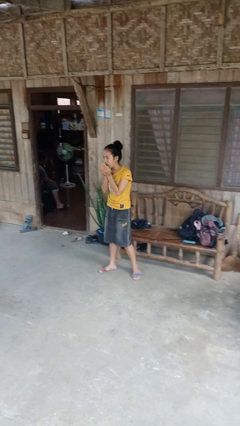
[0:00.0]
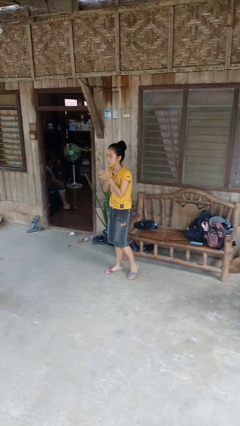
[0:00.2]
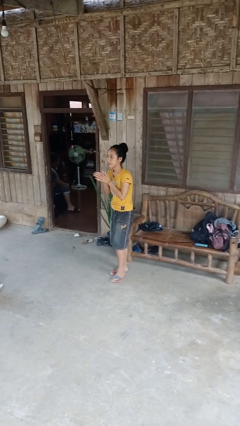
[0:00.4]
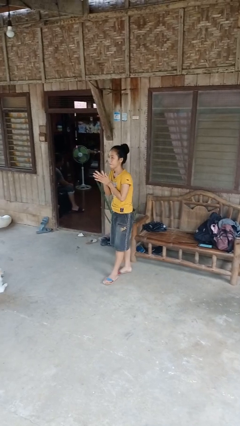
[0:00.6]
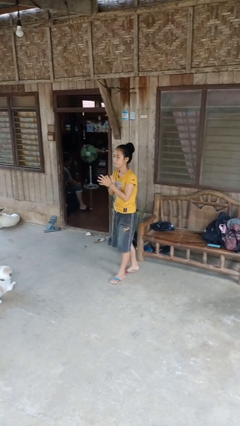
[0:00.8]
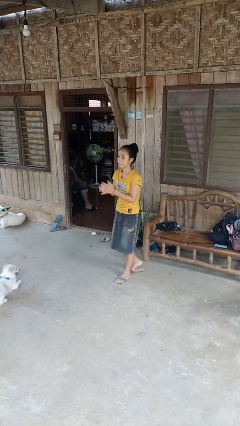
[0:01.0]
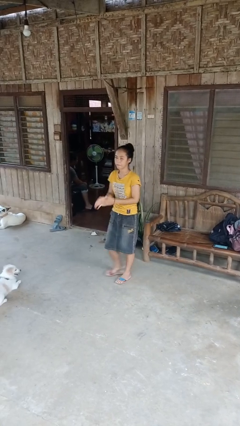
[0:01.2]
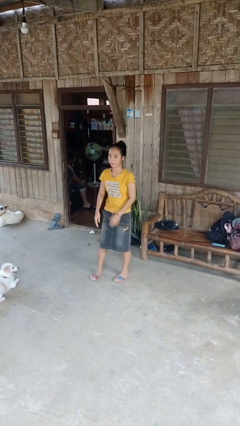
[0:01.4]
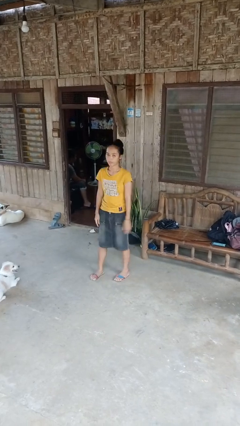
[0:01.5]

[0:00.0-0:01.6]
person blows into hands

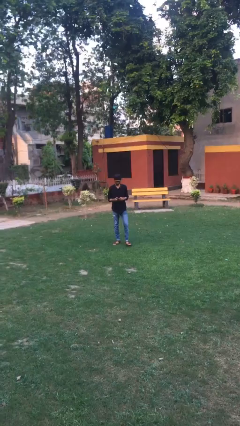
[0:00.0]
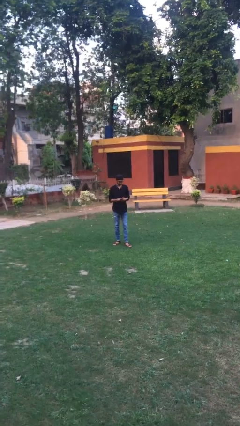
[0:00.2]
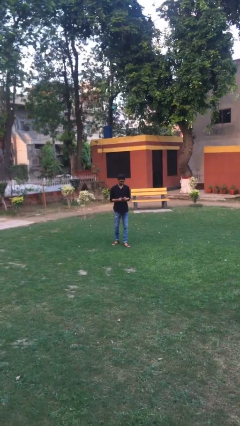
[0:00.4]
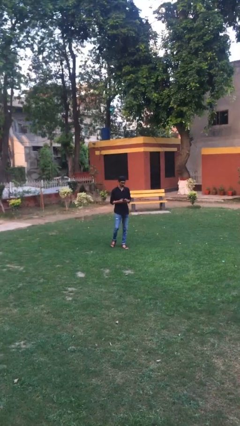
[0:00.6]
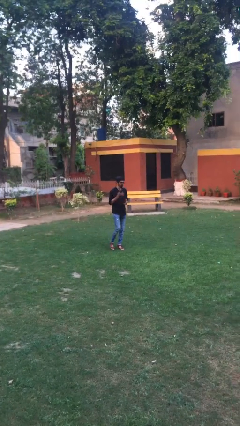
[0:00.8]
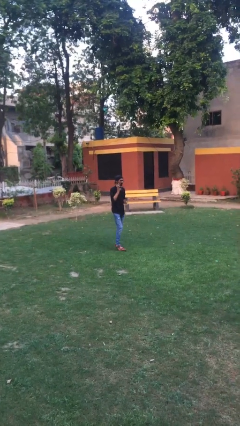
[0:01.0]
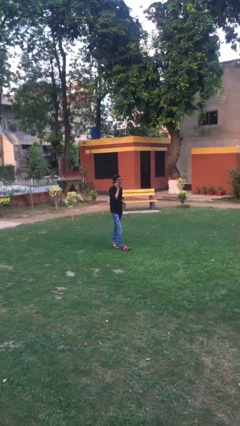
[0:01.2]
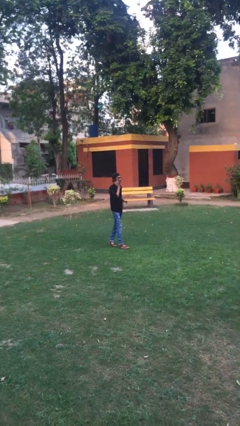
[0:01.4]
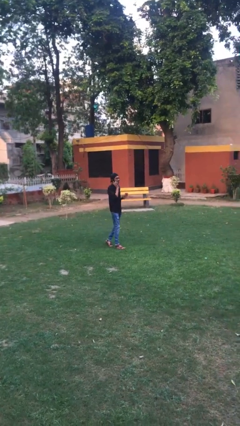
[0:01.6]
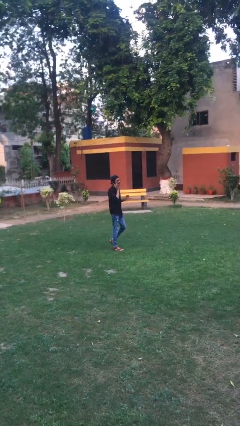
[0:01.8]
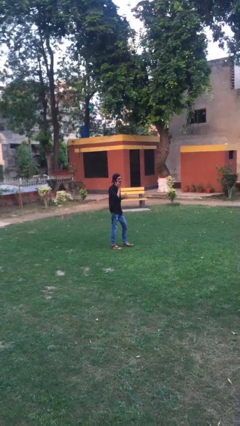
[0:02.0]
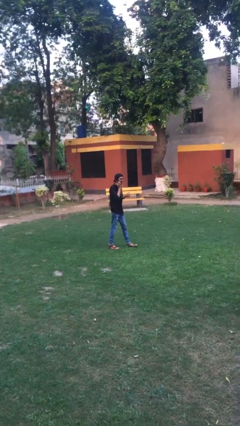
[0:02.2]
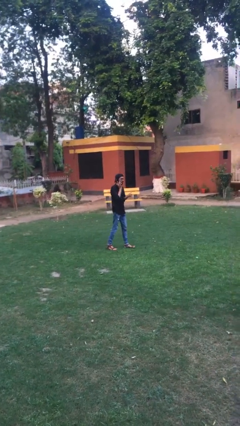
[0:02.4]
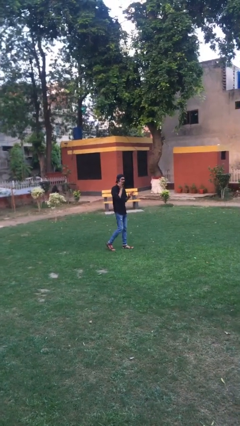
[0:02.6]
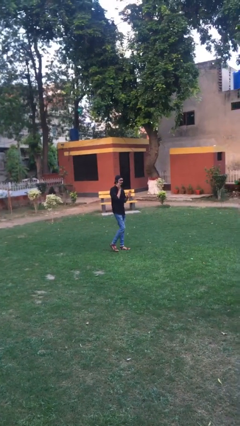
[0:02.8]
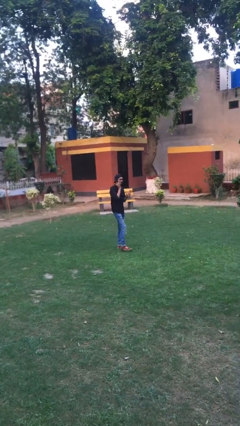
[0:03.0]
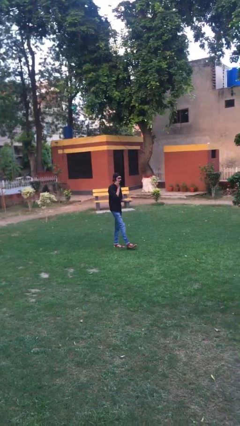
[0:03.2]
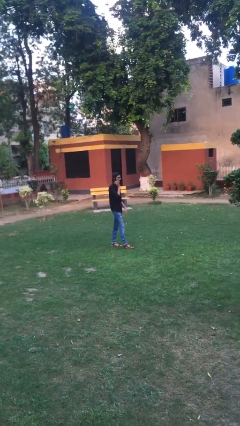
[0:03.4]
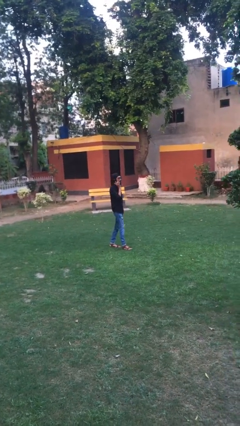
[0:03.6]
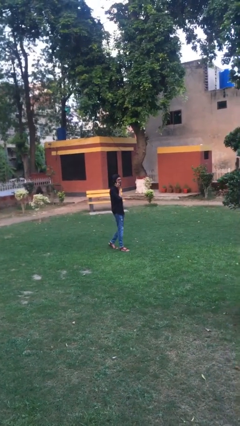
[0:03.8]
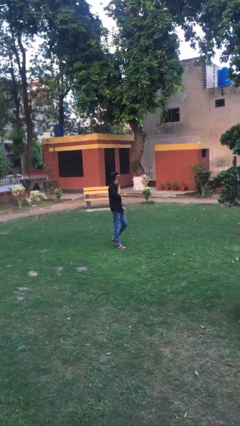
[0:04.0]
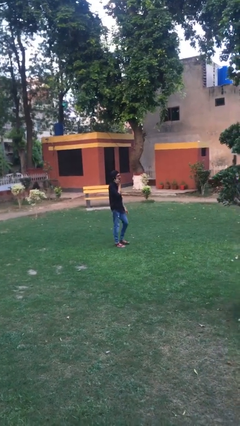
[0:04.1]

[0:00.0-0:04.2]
person talks on phone

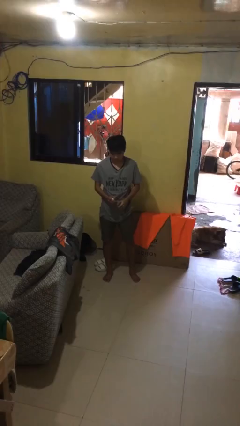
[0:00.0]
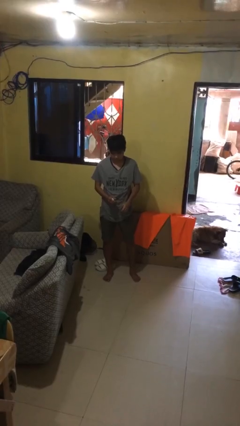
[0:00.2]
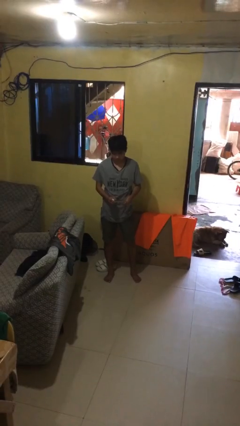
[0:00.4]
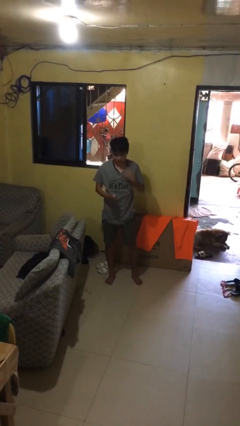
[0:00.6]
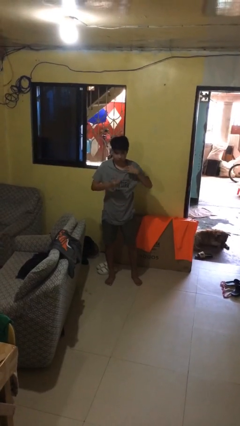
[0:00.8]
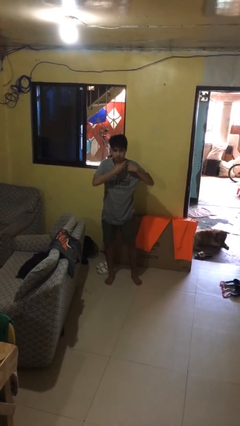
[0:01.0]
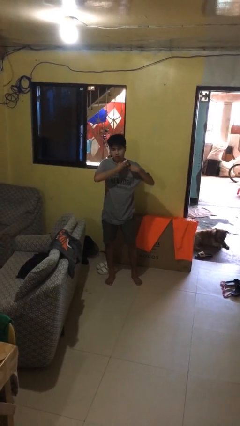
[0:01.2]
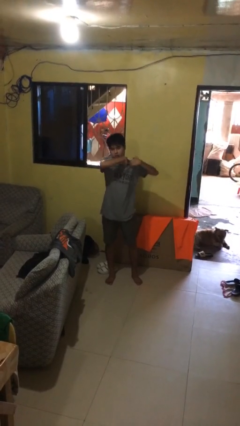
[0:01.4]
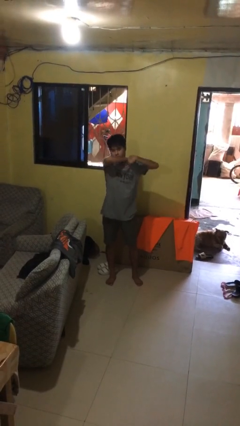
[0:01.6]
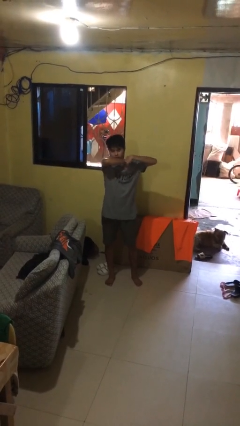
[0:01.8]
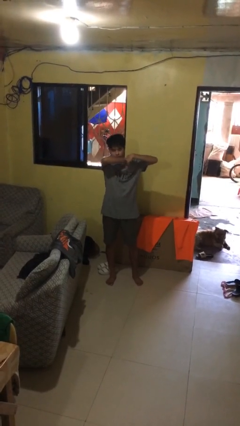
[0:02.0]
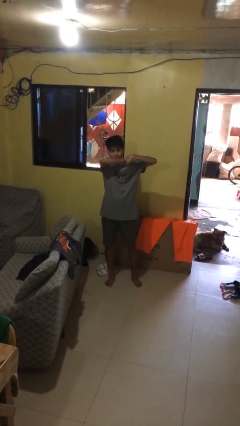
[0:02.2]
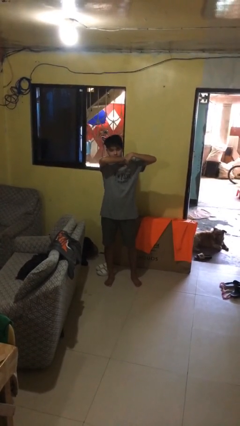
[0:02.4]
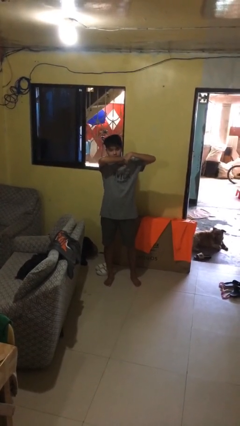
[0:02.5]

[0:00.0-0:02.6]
person applies deodorant

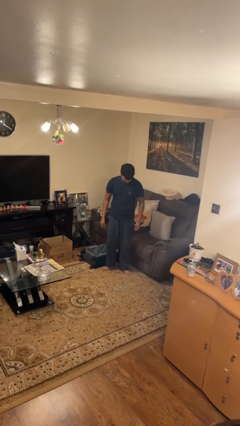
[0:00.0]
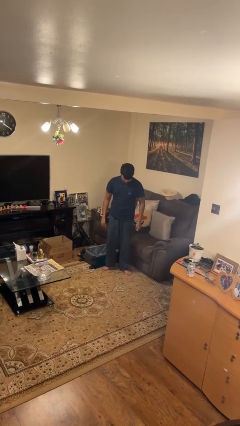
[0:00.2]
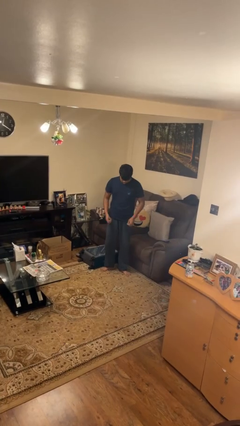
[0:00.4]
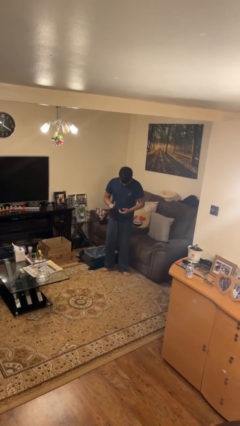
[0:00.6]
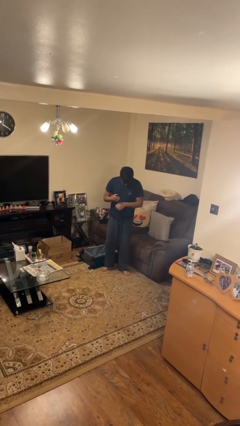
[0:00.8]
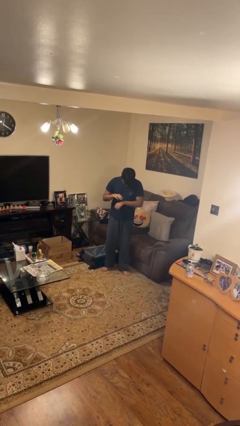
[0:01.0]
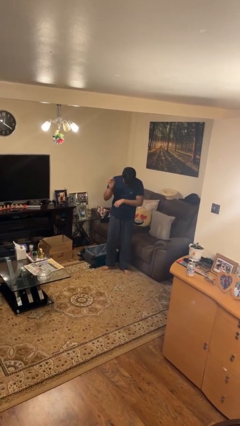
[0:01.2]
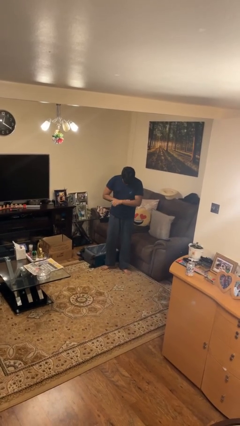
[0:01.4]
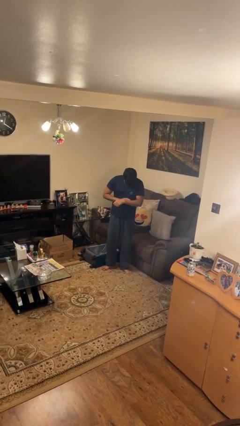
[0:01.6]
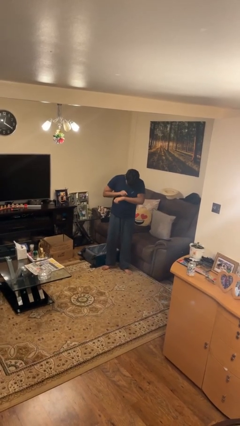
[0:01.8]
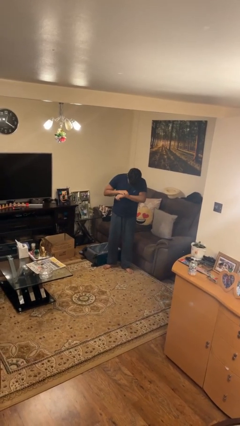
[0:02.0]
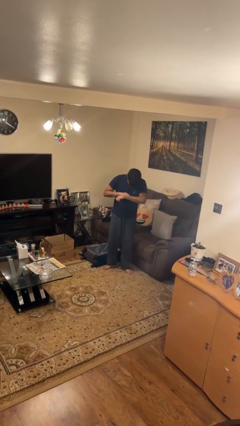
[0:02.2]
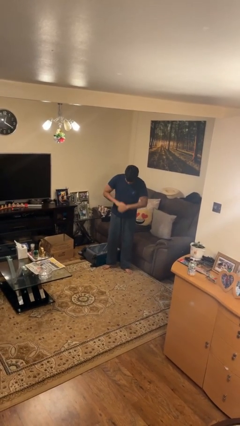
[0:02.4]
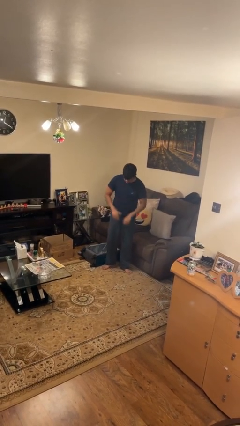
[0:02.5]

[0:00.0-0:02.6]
person swats bug

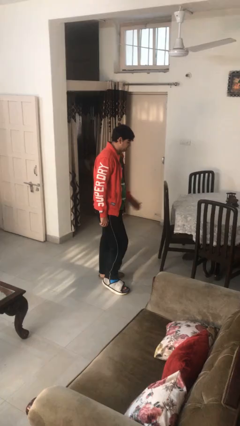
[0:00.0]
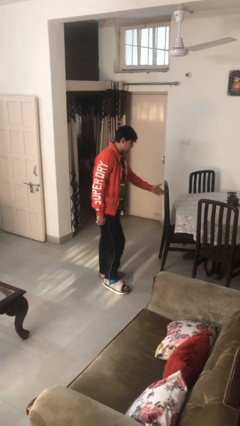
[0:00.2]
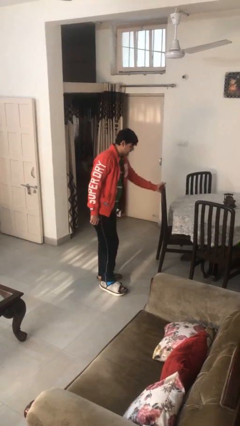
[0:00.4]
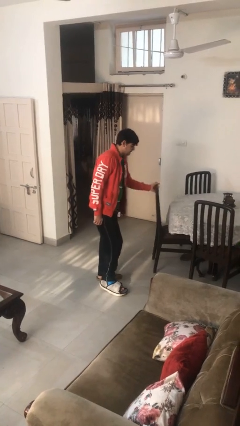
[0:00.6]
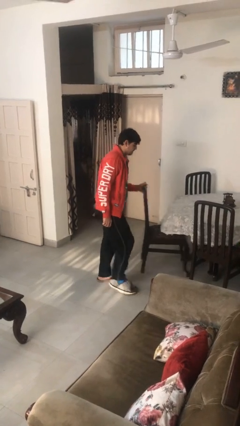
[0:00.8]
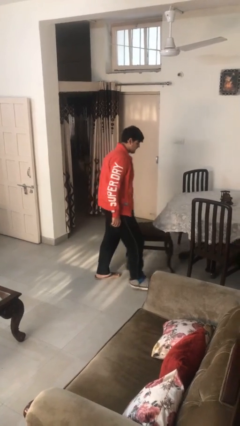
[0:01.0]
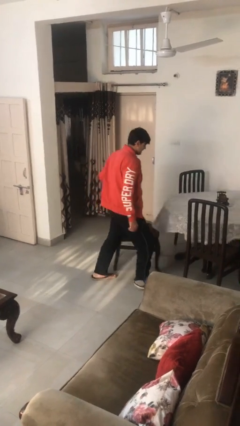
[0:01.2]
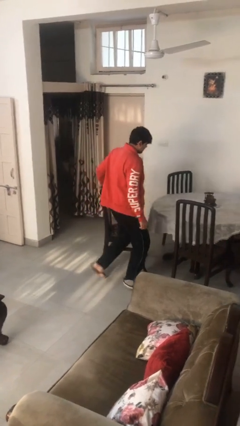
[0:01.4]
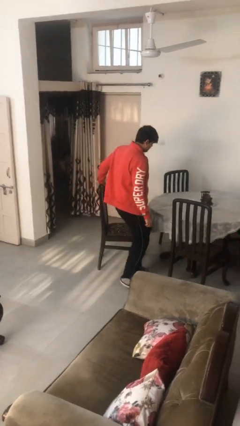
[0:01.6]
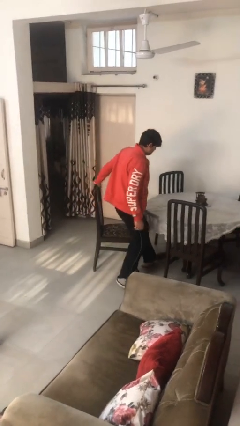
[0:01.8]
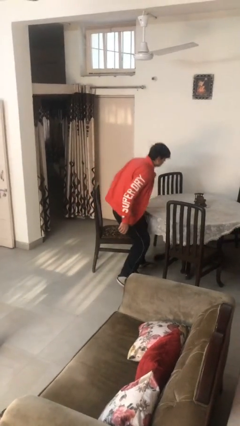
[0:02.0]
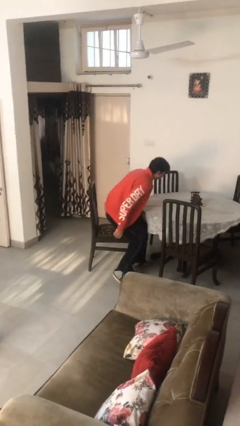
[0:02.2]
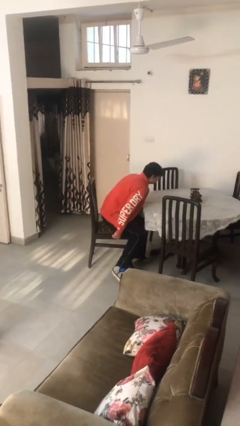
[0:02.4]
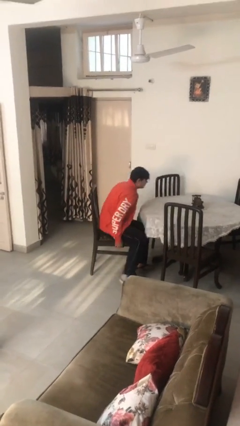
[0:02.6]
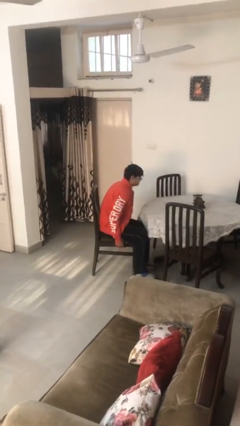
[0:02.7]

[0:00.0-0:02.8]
person sits down

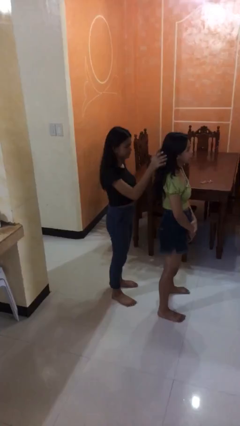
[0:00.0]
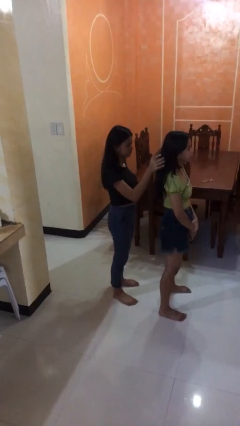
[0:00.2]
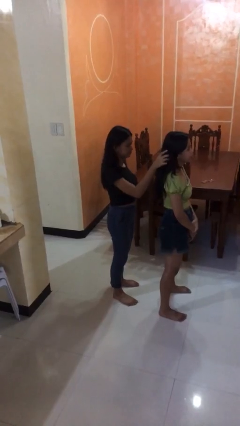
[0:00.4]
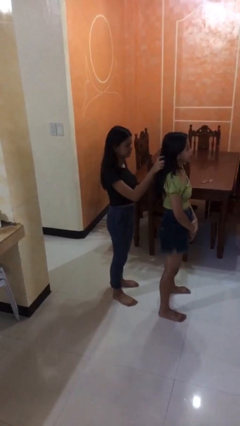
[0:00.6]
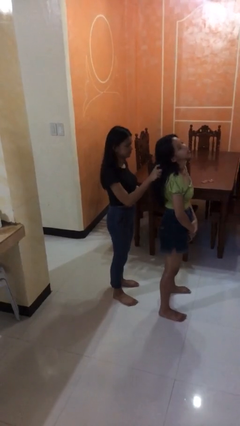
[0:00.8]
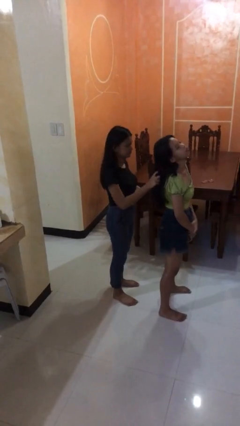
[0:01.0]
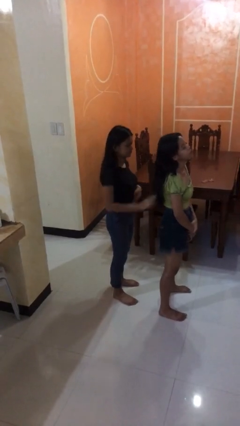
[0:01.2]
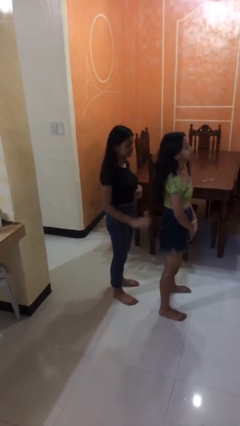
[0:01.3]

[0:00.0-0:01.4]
person grabs person by hair

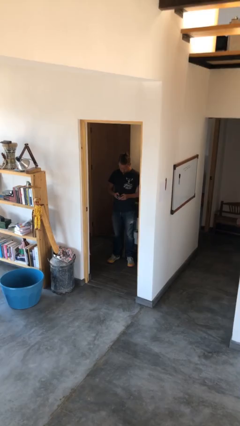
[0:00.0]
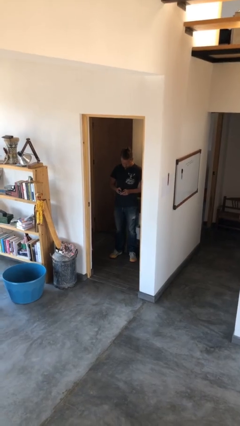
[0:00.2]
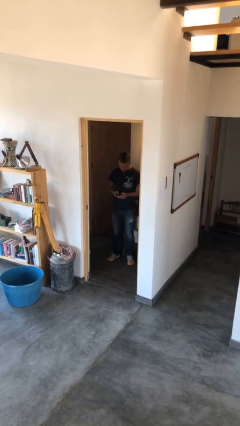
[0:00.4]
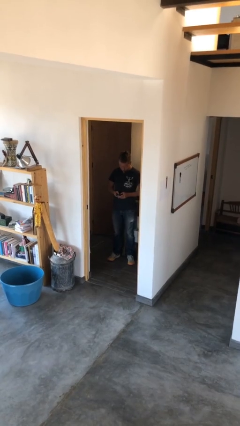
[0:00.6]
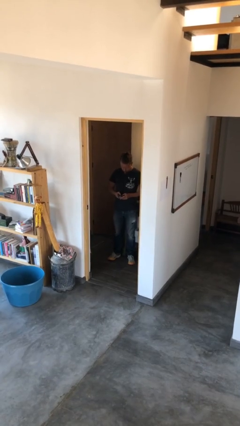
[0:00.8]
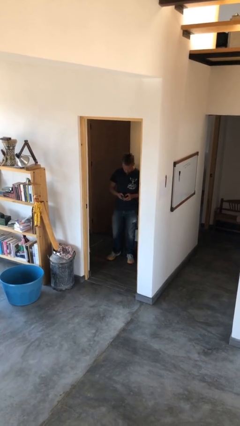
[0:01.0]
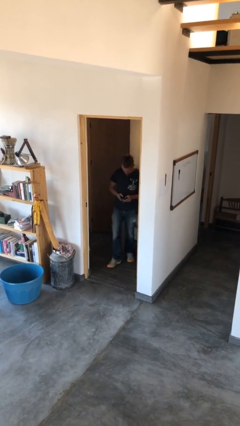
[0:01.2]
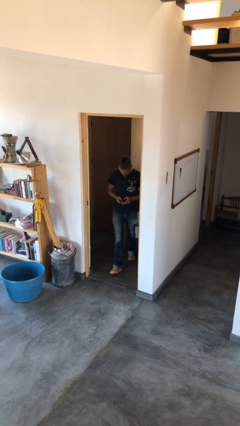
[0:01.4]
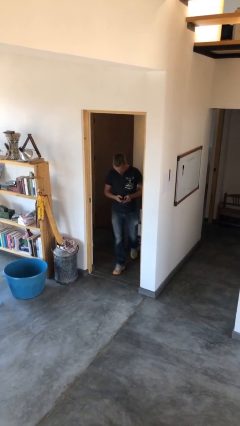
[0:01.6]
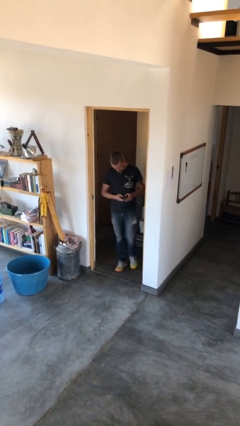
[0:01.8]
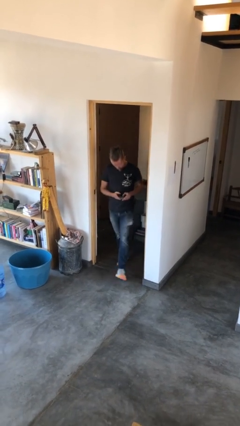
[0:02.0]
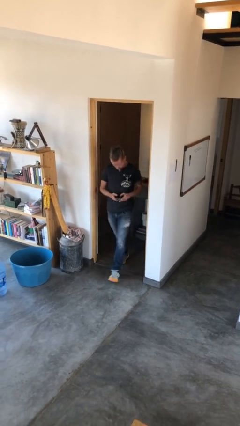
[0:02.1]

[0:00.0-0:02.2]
person enters scene through structure
